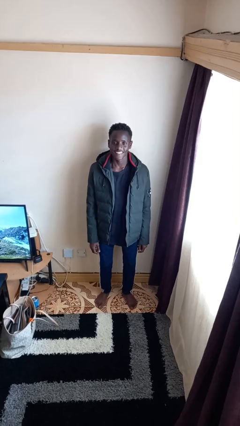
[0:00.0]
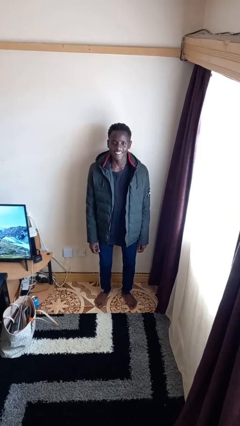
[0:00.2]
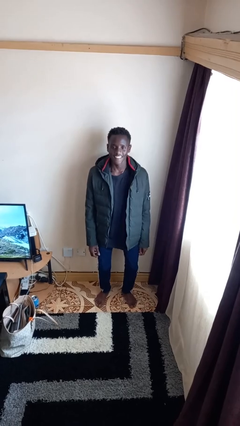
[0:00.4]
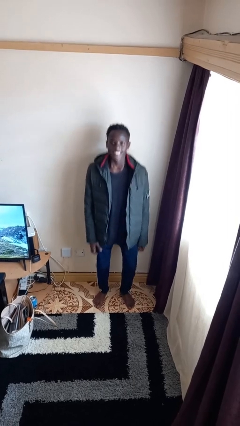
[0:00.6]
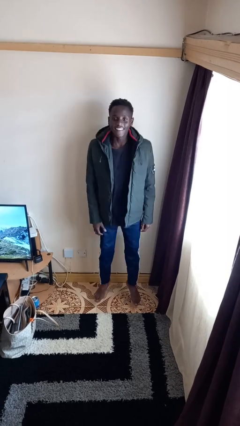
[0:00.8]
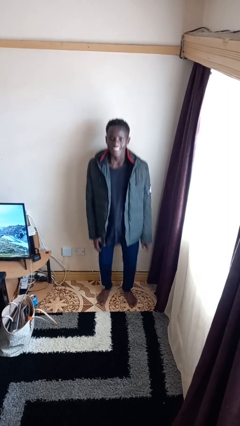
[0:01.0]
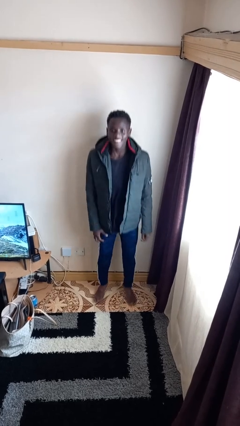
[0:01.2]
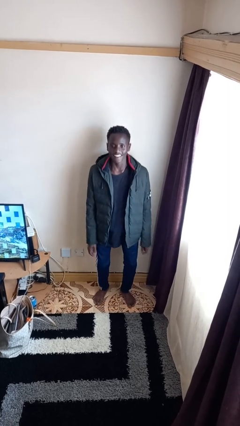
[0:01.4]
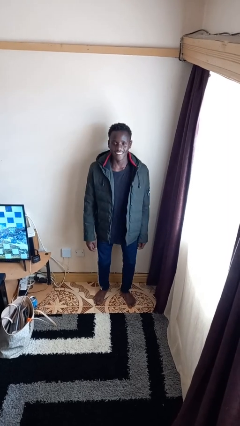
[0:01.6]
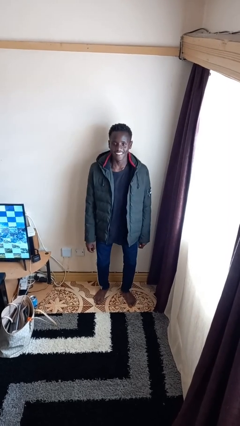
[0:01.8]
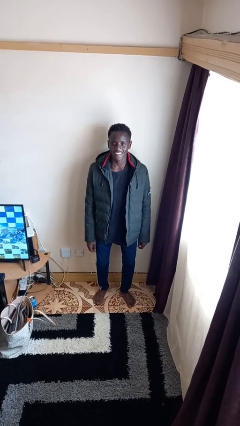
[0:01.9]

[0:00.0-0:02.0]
person jumps

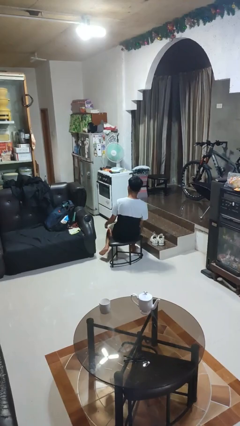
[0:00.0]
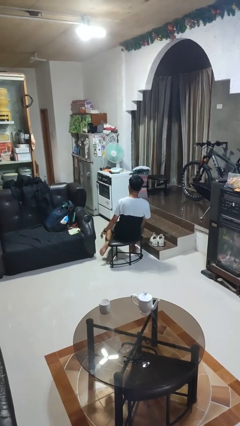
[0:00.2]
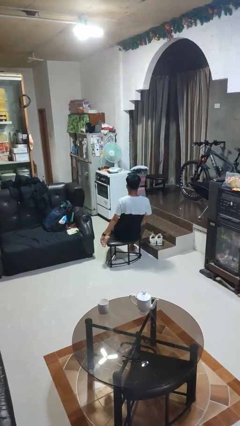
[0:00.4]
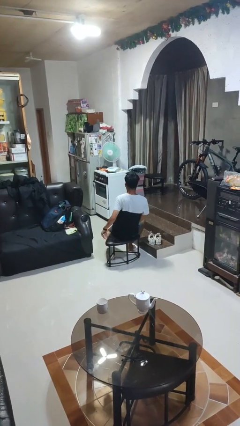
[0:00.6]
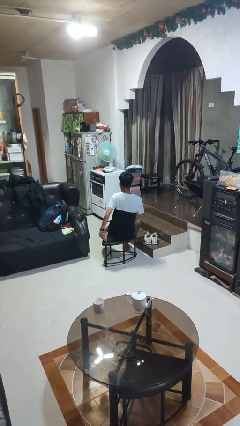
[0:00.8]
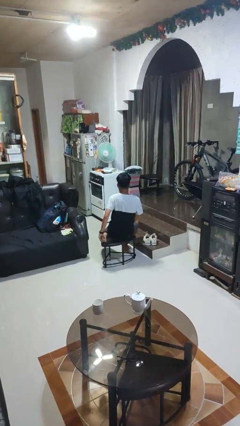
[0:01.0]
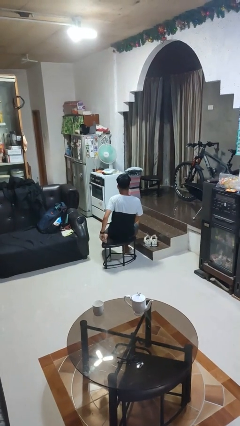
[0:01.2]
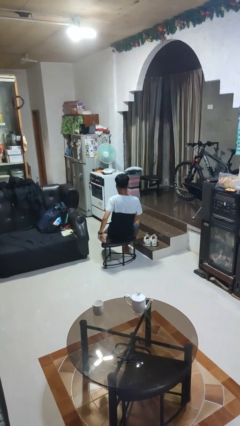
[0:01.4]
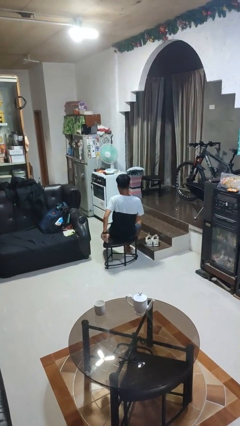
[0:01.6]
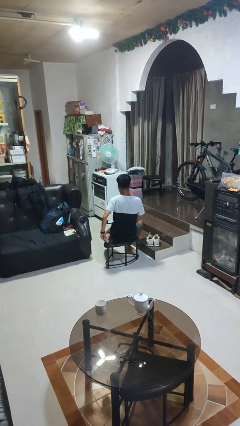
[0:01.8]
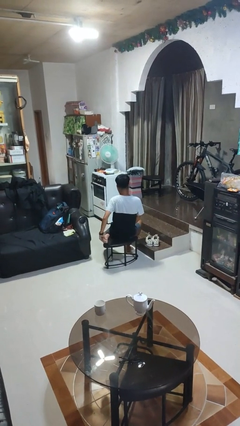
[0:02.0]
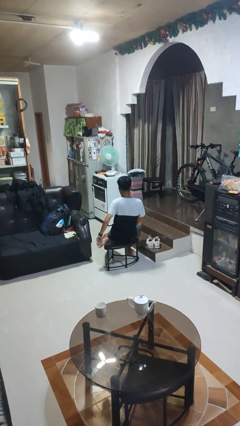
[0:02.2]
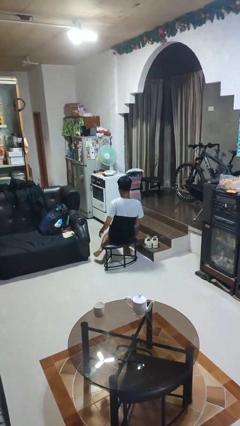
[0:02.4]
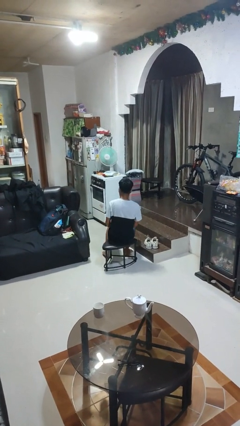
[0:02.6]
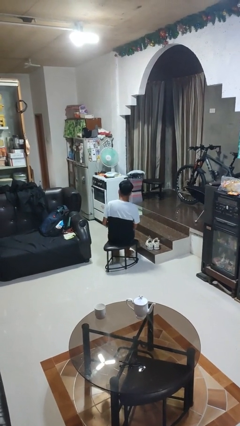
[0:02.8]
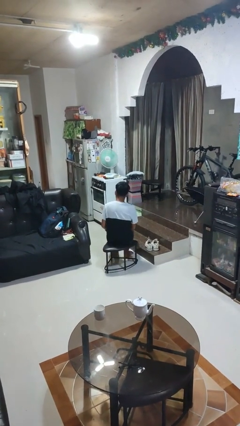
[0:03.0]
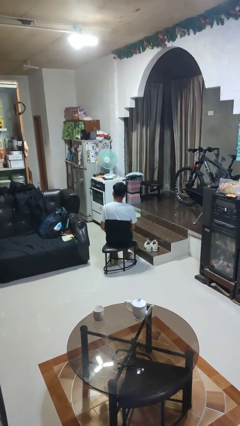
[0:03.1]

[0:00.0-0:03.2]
person rubs foot

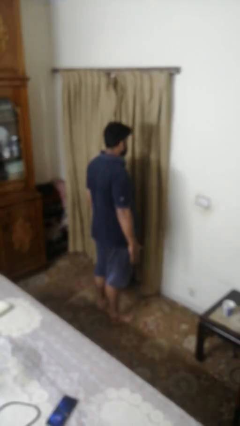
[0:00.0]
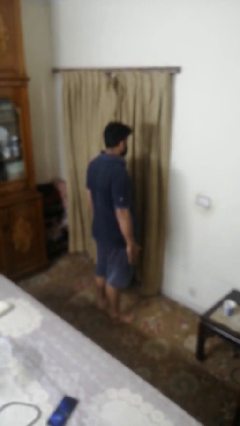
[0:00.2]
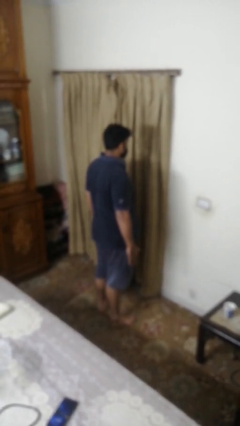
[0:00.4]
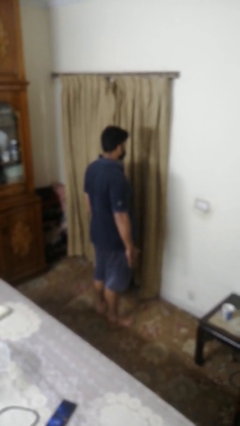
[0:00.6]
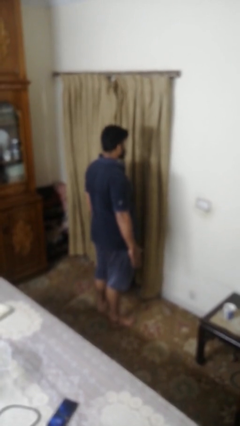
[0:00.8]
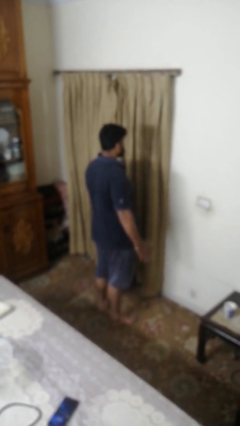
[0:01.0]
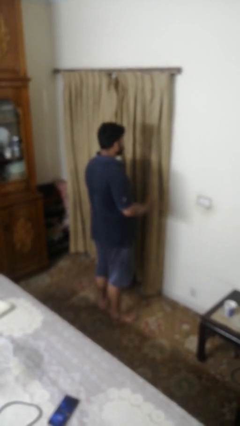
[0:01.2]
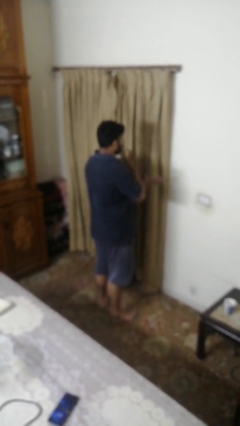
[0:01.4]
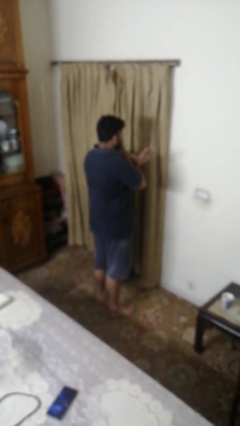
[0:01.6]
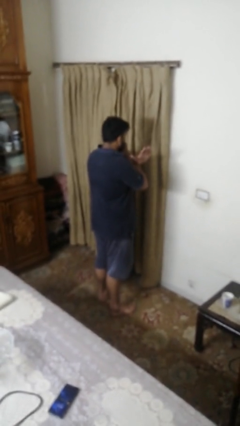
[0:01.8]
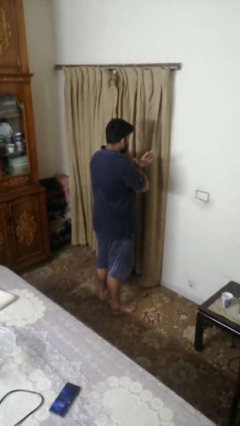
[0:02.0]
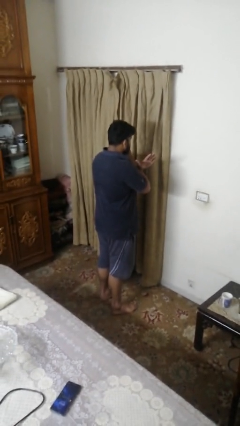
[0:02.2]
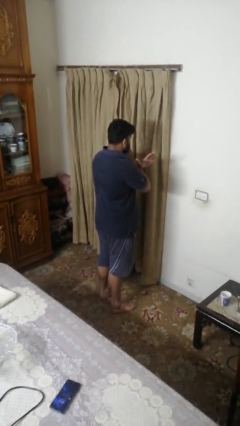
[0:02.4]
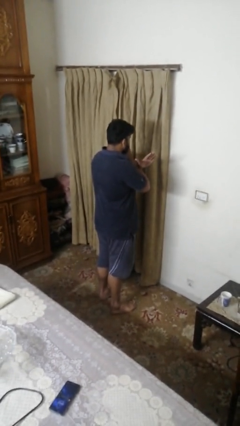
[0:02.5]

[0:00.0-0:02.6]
person gestures arms x

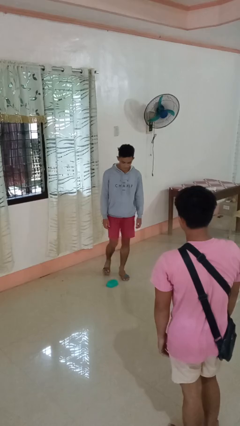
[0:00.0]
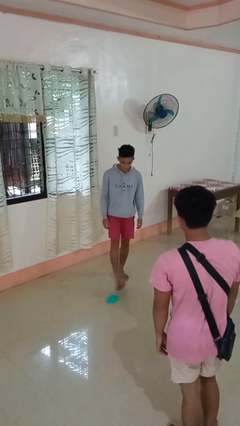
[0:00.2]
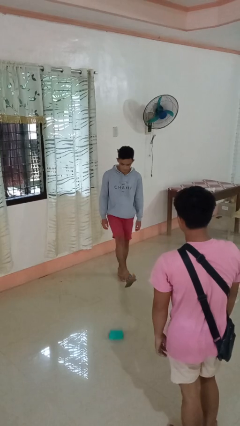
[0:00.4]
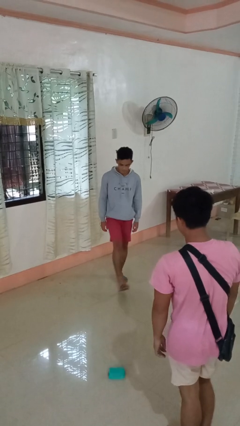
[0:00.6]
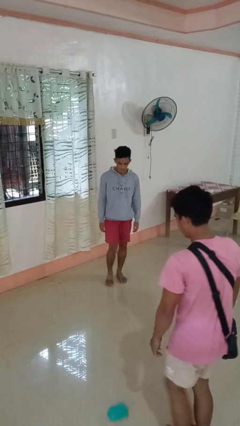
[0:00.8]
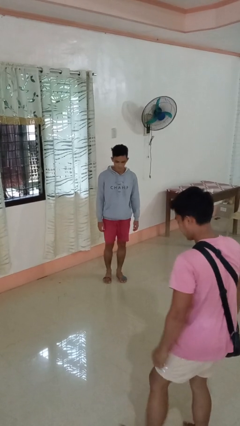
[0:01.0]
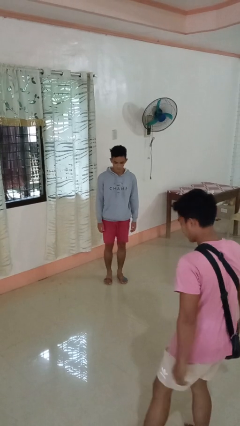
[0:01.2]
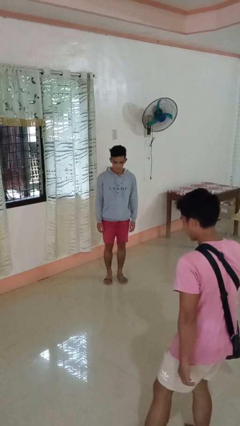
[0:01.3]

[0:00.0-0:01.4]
person kicks object to person

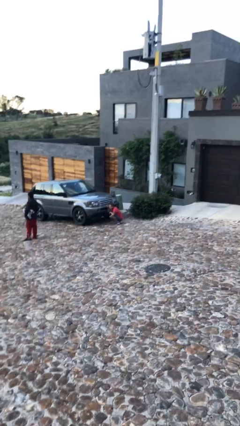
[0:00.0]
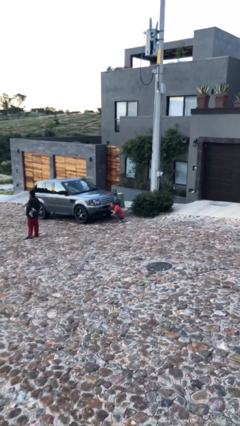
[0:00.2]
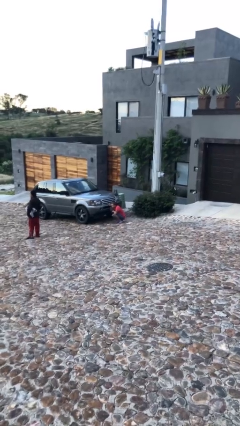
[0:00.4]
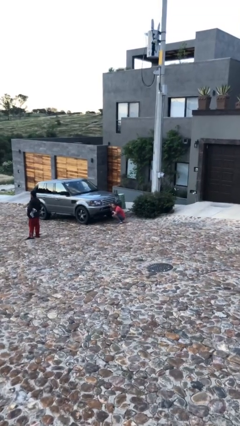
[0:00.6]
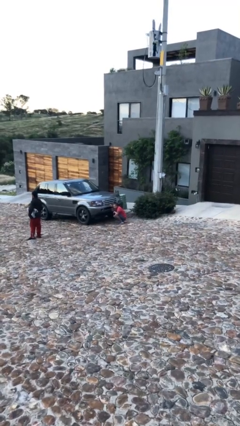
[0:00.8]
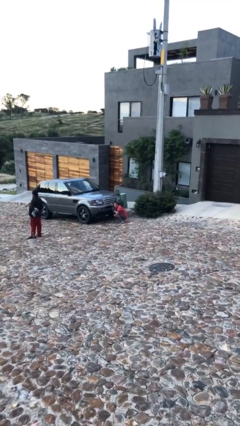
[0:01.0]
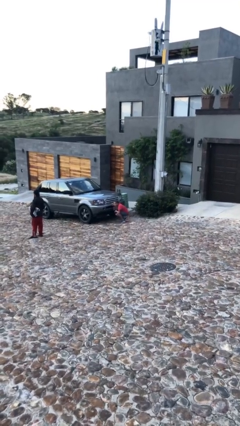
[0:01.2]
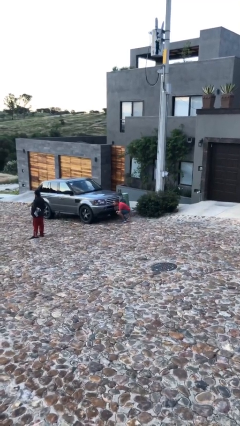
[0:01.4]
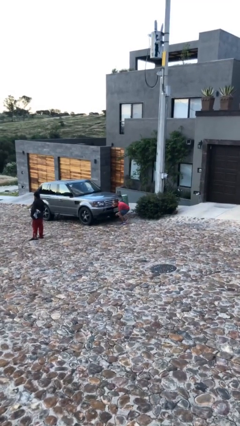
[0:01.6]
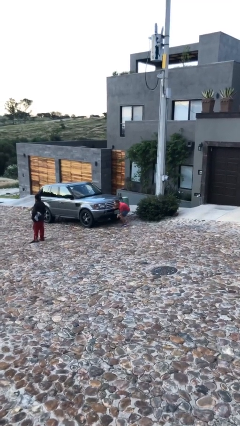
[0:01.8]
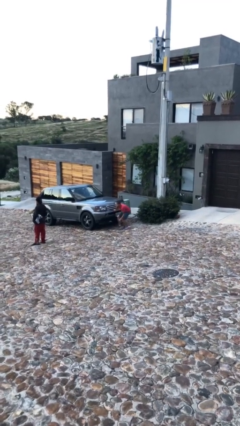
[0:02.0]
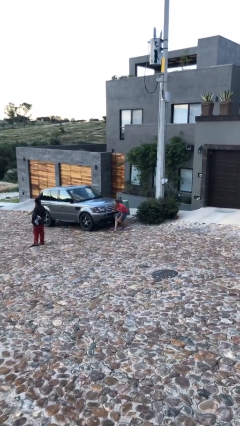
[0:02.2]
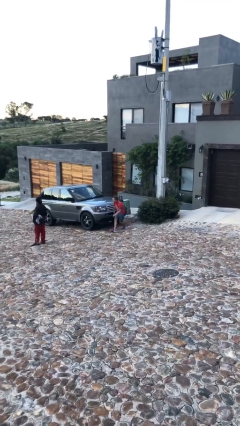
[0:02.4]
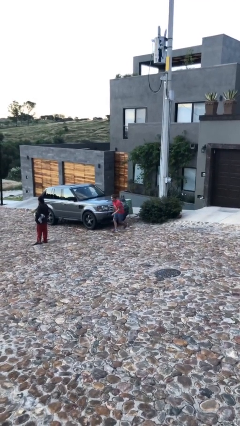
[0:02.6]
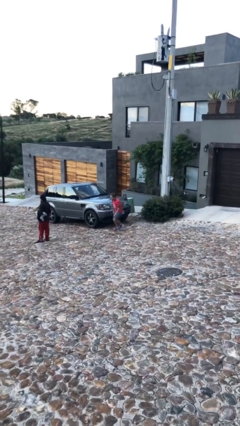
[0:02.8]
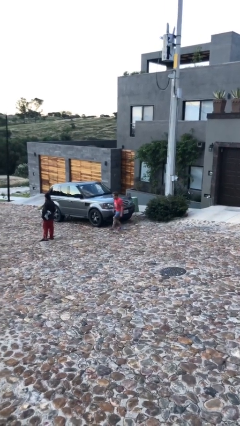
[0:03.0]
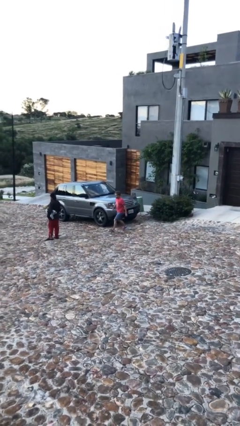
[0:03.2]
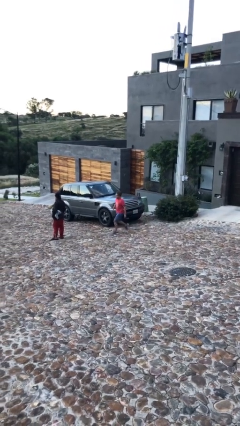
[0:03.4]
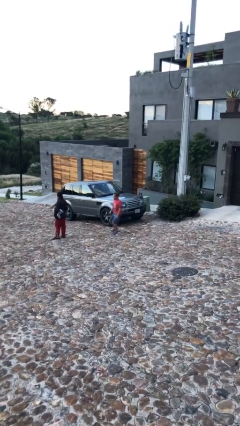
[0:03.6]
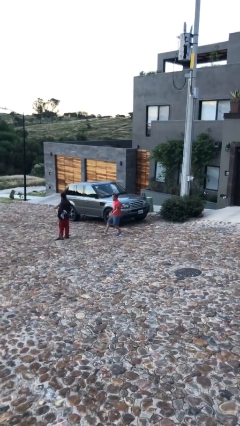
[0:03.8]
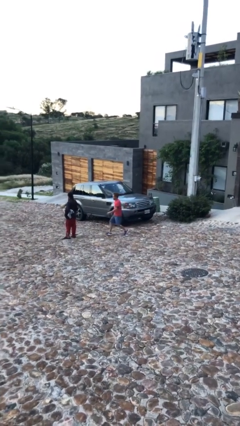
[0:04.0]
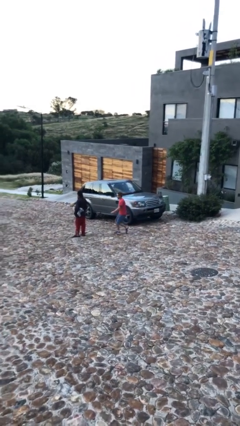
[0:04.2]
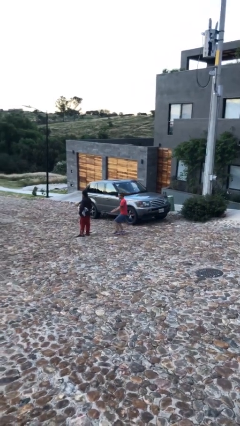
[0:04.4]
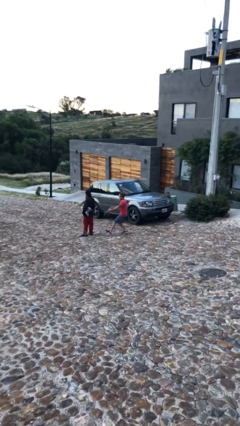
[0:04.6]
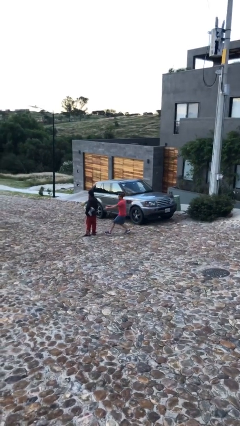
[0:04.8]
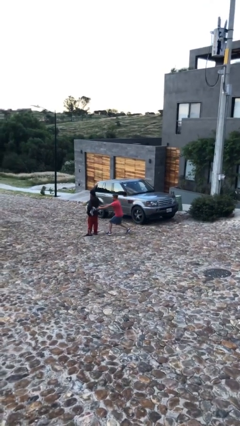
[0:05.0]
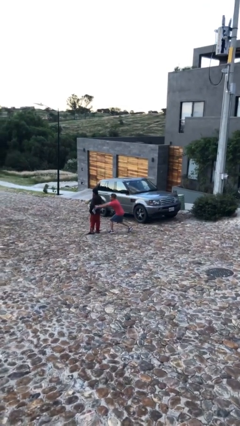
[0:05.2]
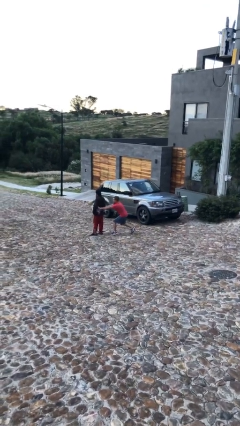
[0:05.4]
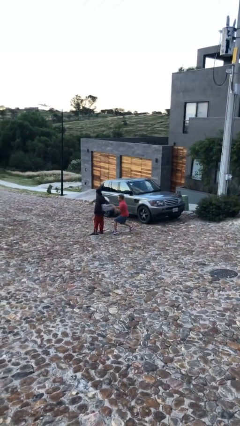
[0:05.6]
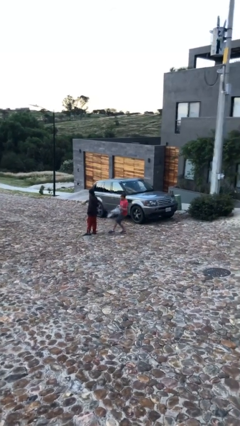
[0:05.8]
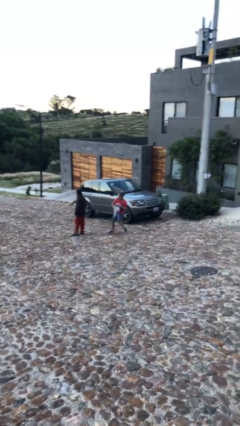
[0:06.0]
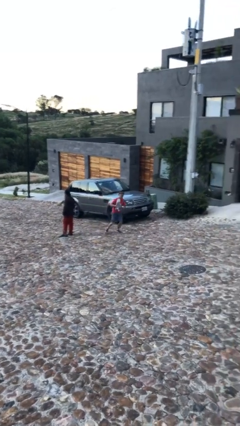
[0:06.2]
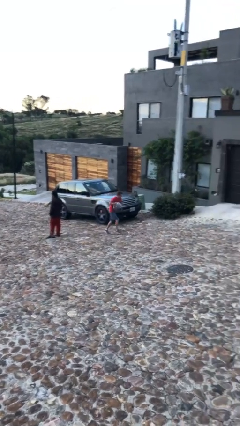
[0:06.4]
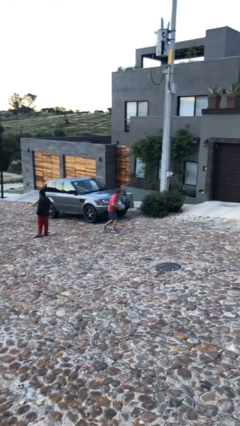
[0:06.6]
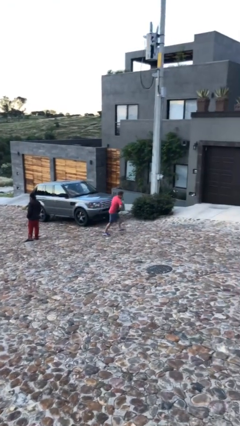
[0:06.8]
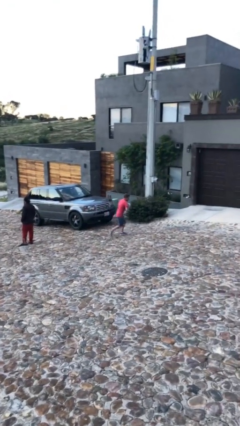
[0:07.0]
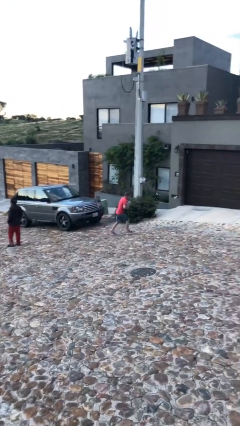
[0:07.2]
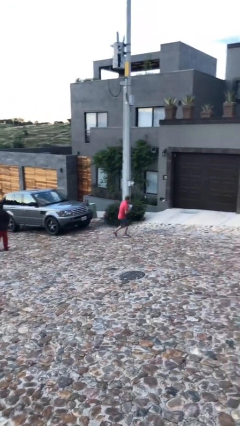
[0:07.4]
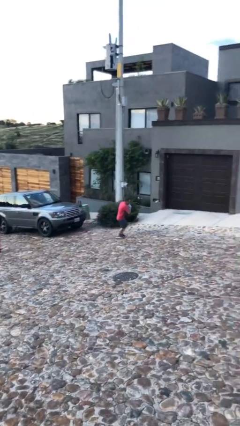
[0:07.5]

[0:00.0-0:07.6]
person steals object from person

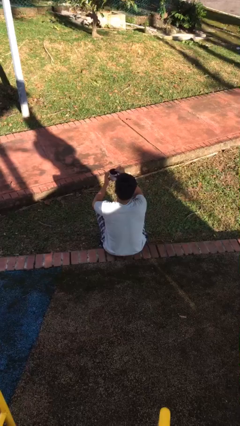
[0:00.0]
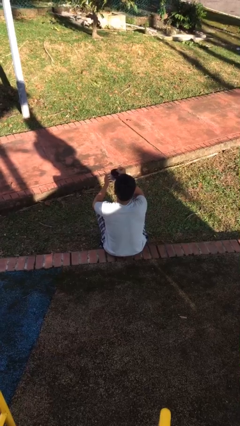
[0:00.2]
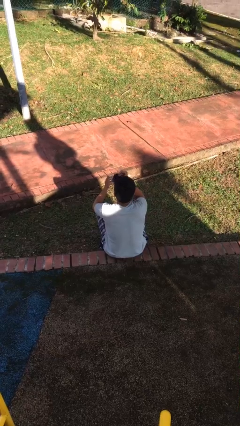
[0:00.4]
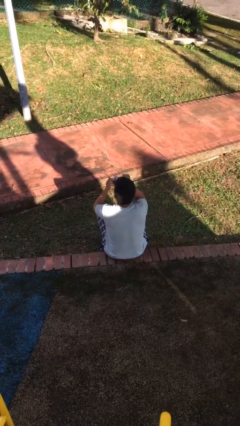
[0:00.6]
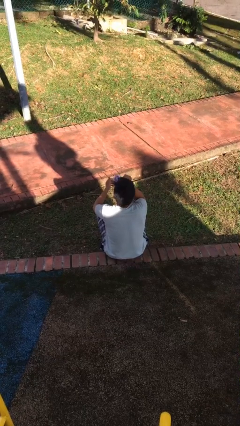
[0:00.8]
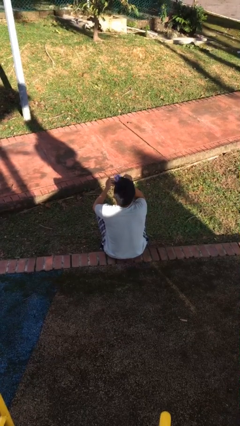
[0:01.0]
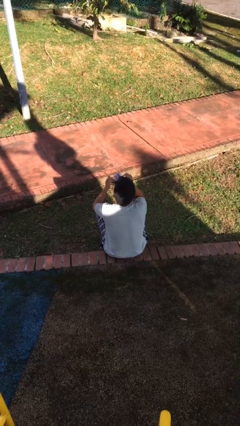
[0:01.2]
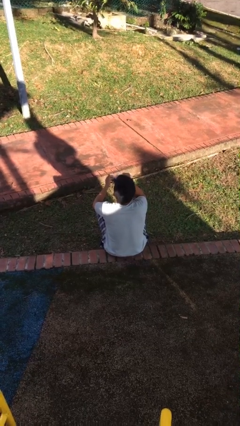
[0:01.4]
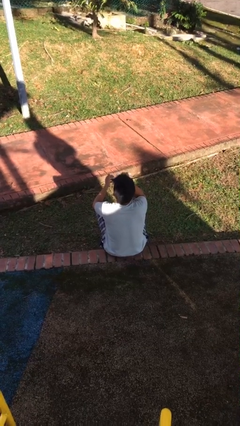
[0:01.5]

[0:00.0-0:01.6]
person drinks from mug
